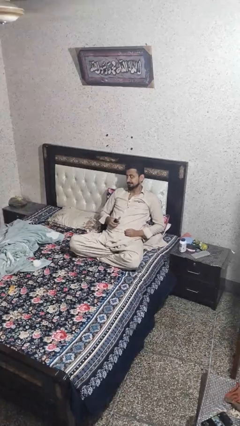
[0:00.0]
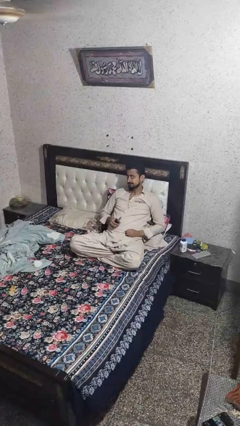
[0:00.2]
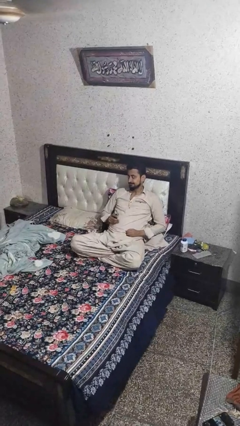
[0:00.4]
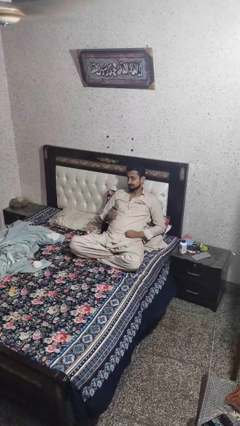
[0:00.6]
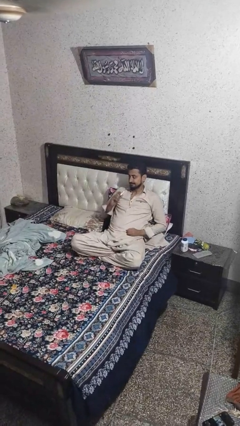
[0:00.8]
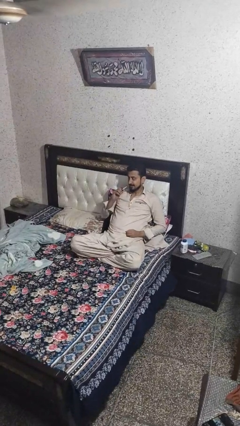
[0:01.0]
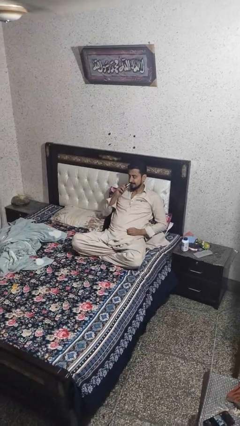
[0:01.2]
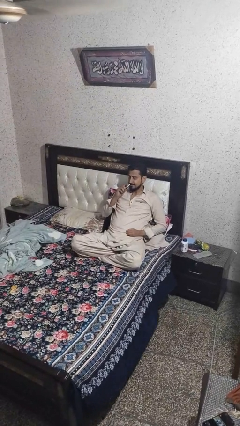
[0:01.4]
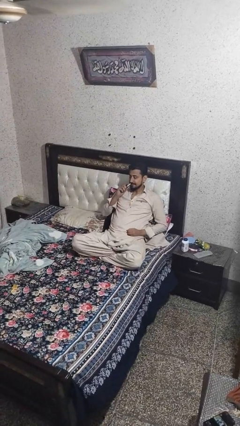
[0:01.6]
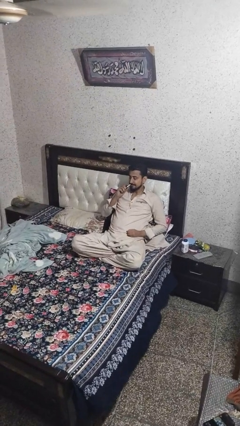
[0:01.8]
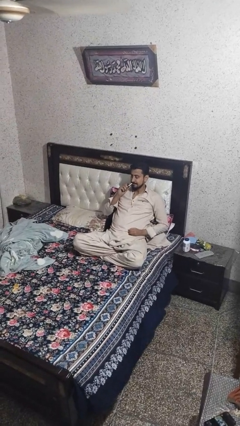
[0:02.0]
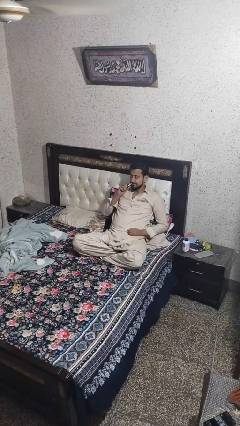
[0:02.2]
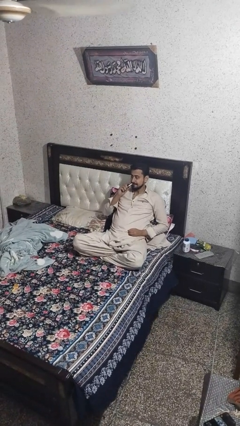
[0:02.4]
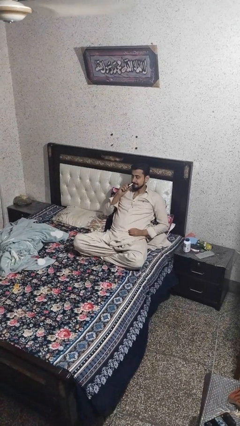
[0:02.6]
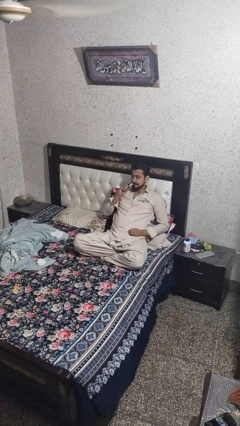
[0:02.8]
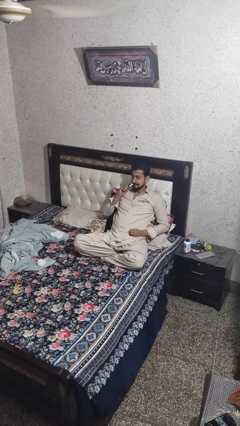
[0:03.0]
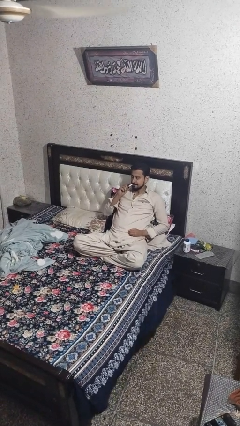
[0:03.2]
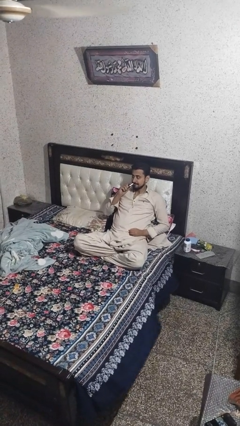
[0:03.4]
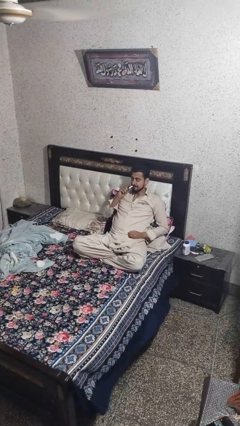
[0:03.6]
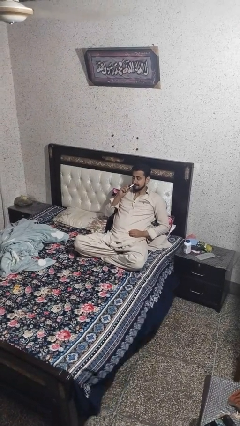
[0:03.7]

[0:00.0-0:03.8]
person vapes

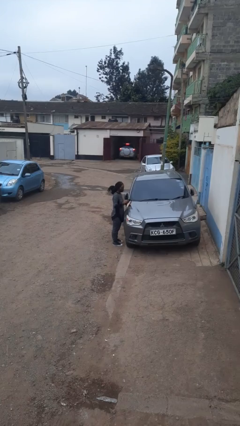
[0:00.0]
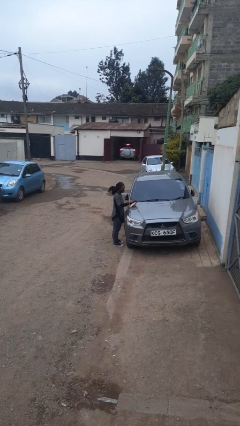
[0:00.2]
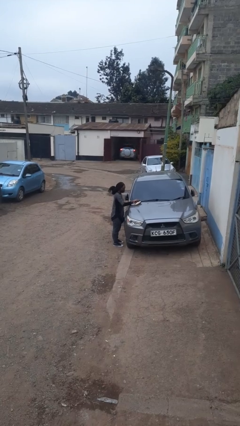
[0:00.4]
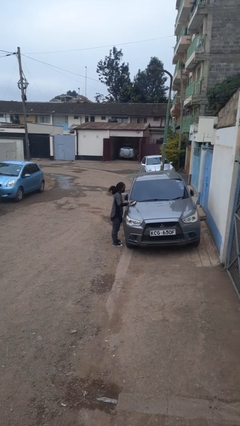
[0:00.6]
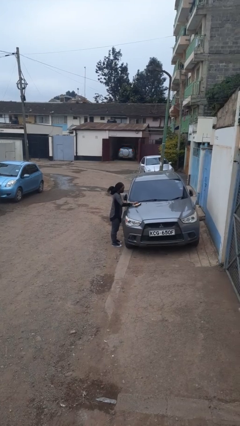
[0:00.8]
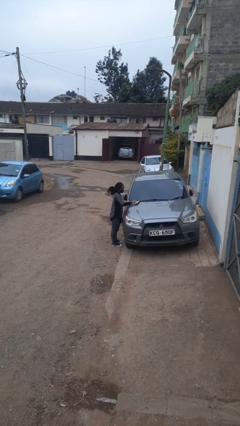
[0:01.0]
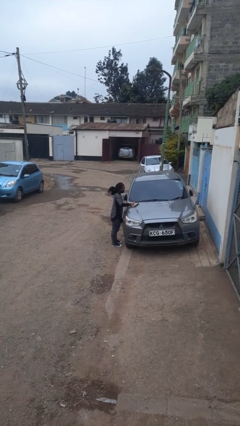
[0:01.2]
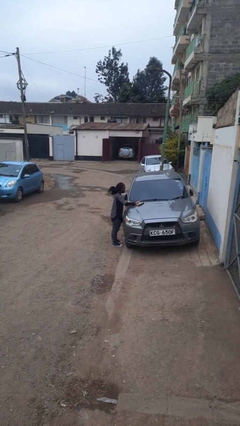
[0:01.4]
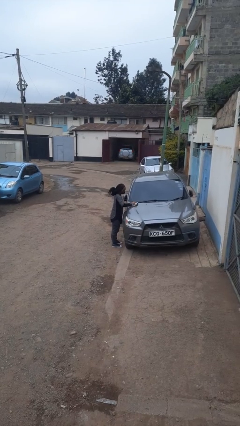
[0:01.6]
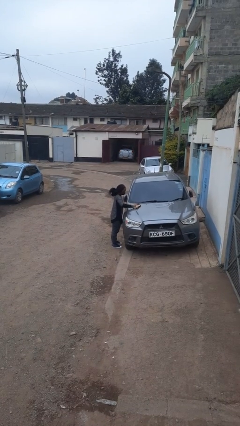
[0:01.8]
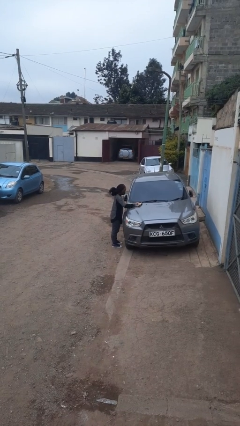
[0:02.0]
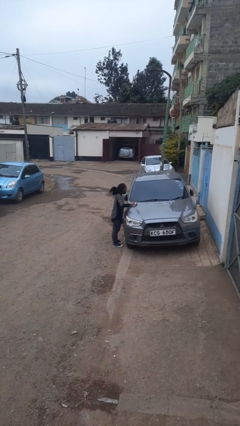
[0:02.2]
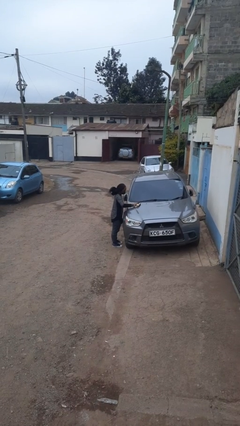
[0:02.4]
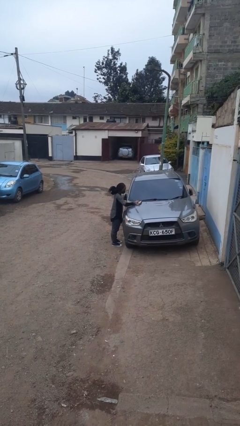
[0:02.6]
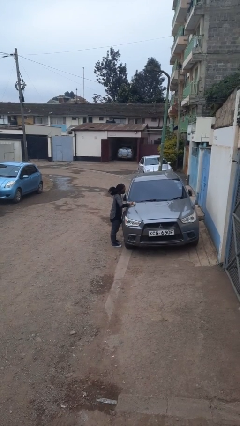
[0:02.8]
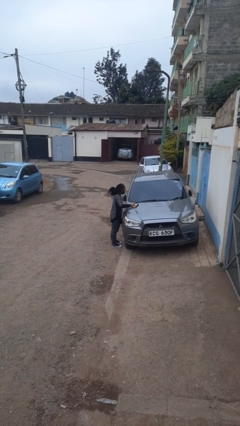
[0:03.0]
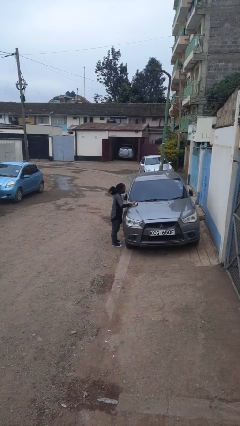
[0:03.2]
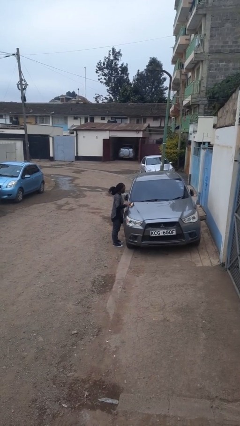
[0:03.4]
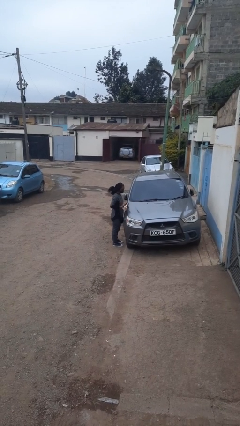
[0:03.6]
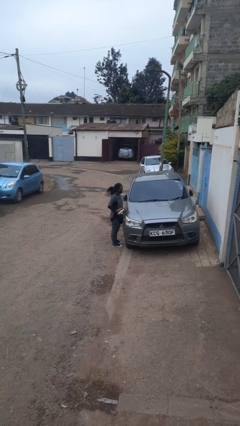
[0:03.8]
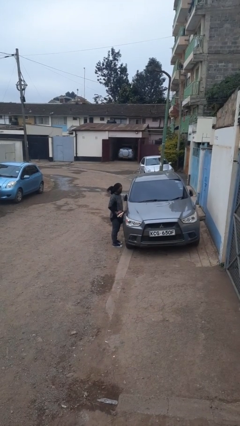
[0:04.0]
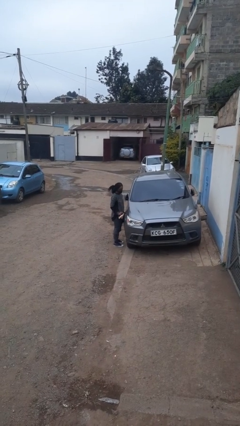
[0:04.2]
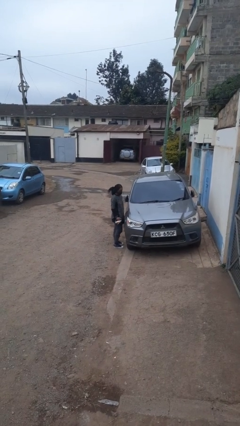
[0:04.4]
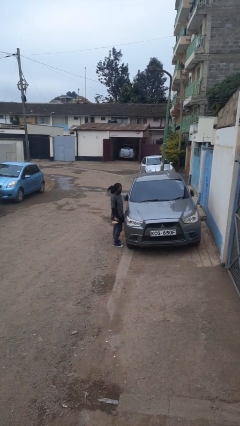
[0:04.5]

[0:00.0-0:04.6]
person polishes car with rag

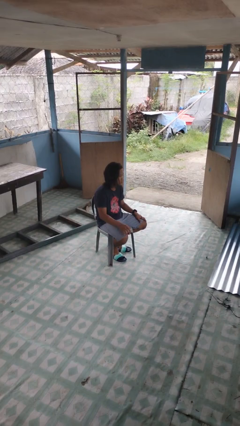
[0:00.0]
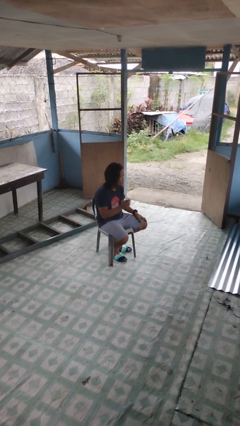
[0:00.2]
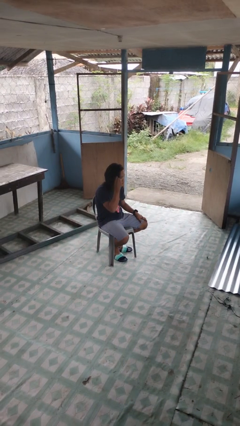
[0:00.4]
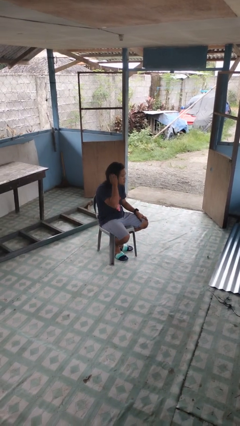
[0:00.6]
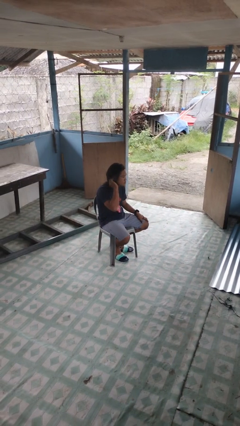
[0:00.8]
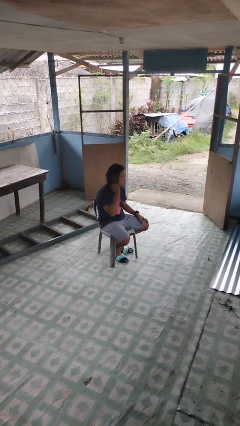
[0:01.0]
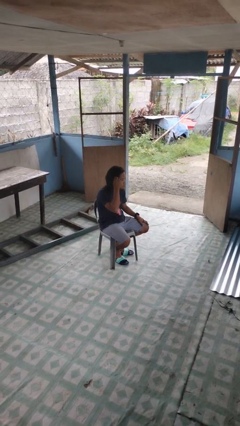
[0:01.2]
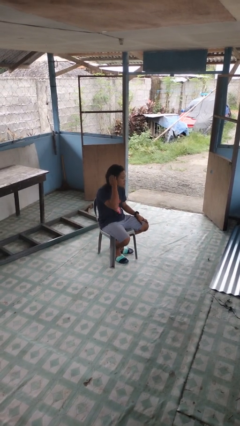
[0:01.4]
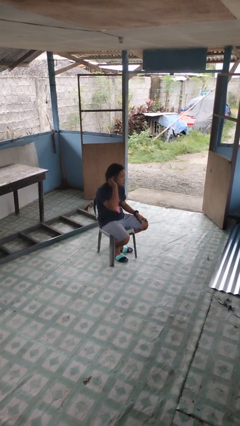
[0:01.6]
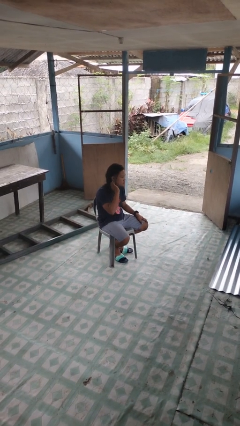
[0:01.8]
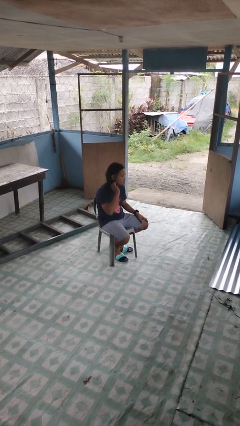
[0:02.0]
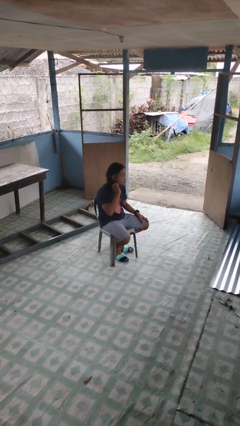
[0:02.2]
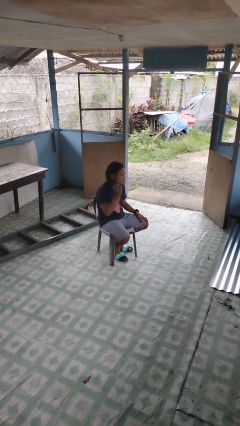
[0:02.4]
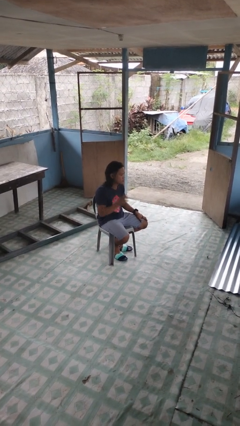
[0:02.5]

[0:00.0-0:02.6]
person strokes hair

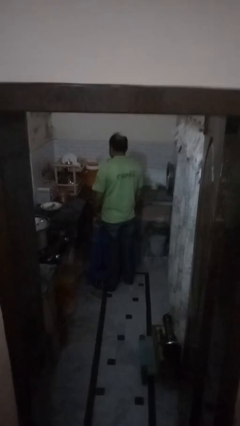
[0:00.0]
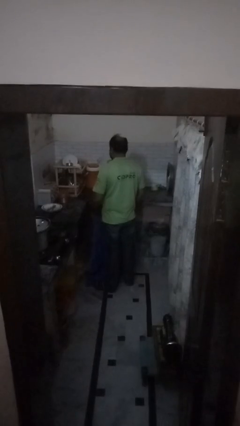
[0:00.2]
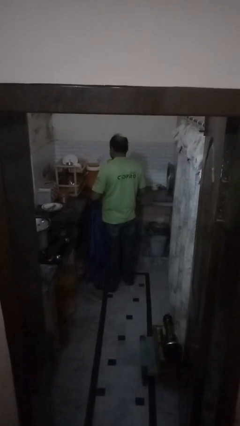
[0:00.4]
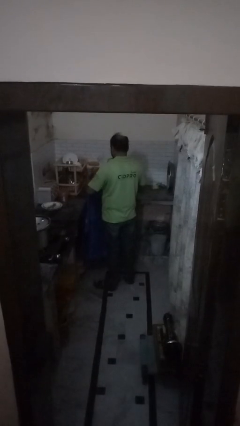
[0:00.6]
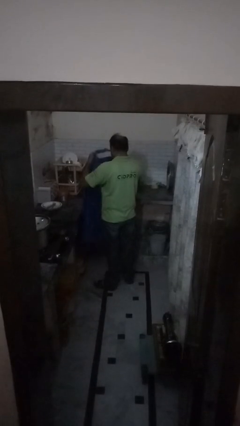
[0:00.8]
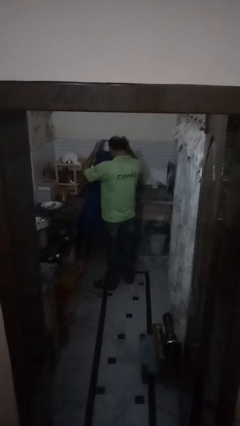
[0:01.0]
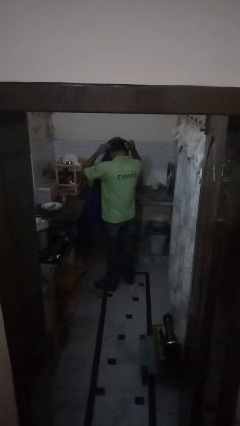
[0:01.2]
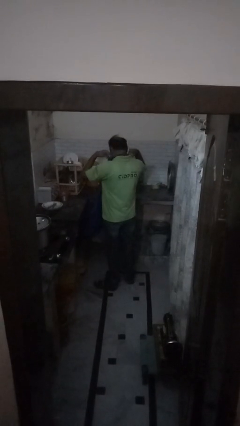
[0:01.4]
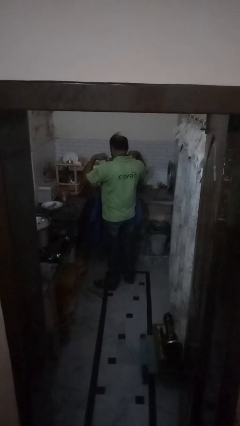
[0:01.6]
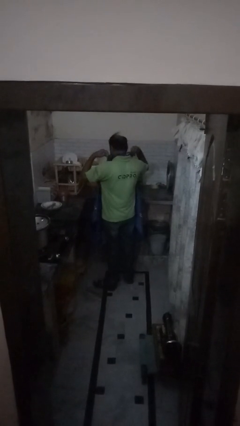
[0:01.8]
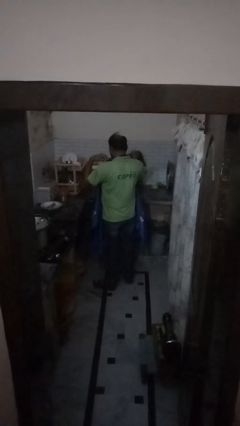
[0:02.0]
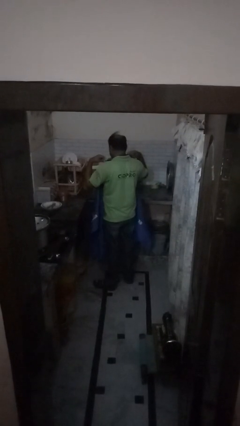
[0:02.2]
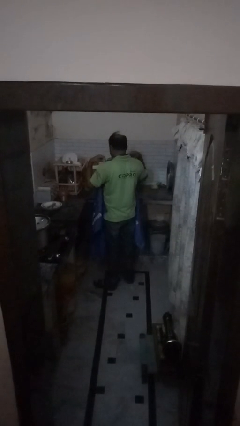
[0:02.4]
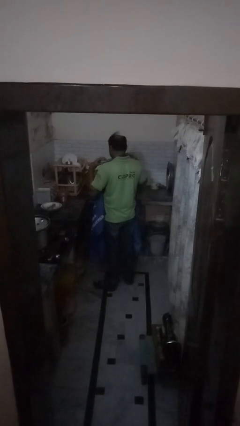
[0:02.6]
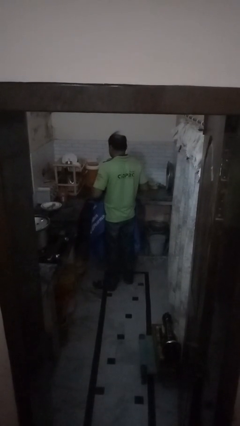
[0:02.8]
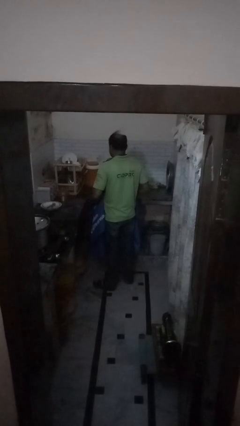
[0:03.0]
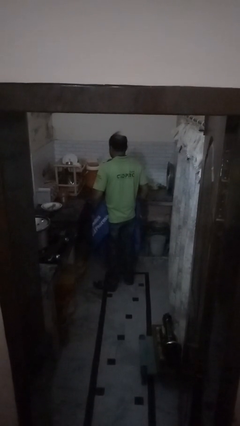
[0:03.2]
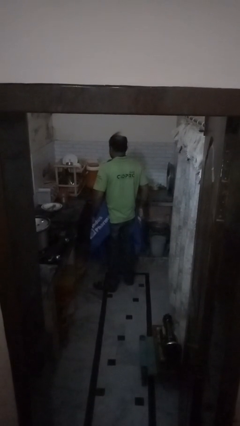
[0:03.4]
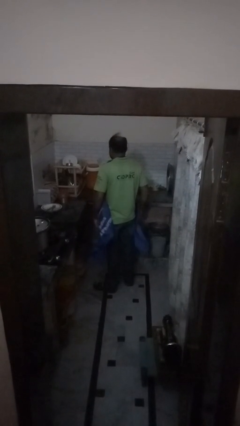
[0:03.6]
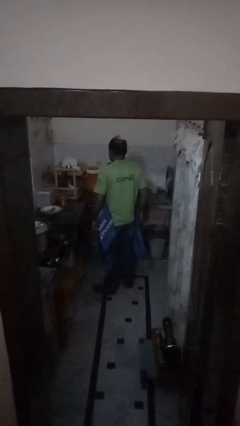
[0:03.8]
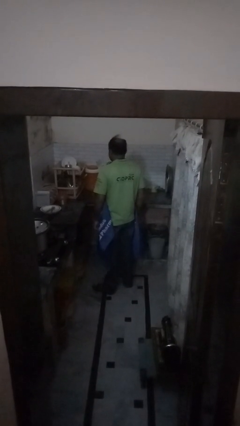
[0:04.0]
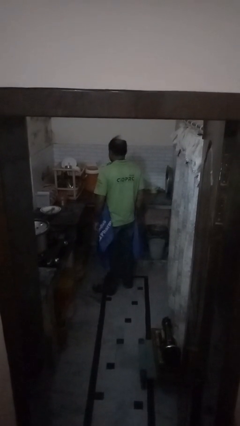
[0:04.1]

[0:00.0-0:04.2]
person puts on apron

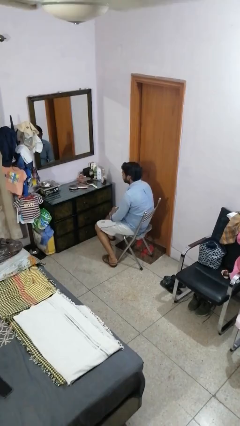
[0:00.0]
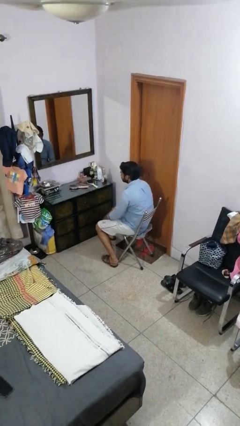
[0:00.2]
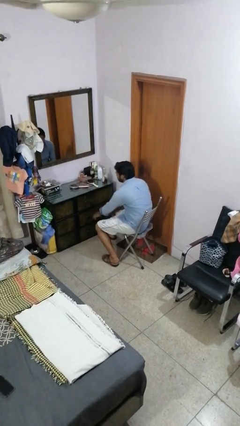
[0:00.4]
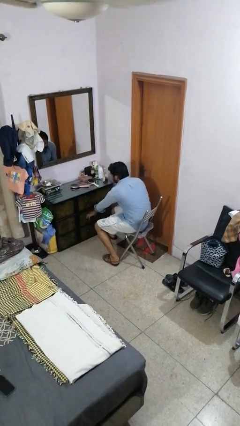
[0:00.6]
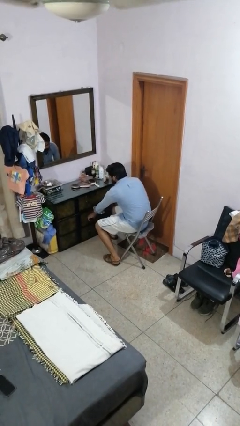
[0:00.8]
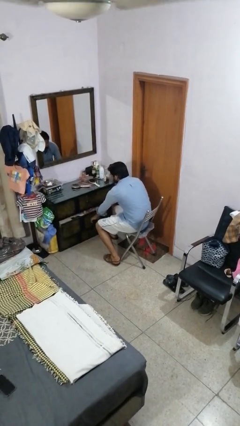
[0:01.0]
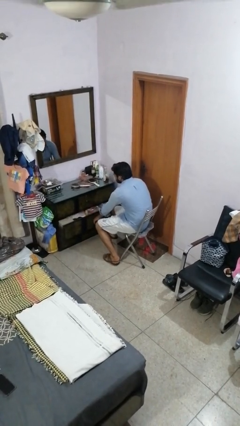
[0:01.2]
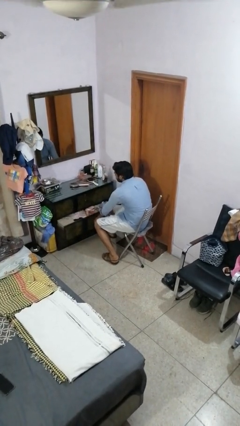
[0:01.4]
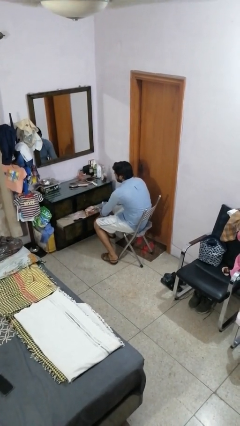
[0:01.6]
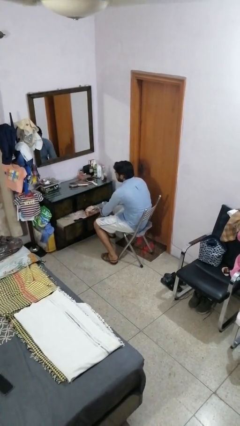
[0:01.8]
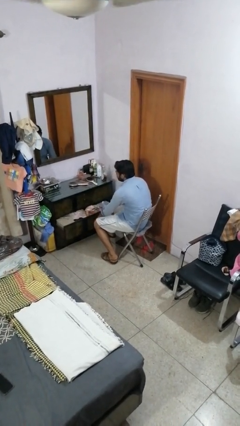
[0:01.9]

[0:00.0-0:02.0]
person opens dresser drawer

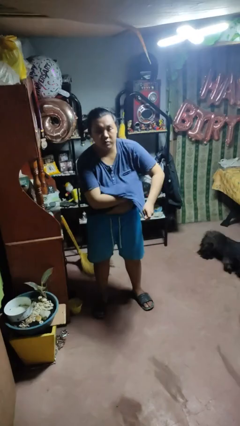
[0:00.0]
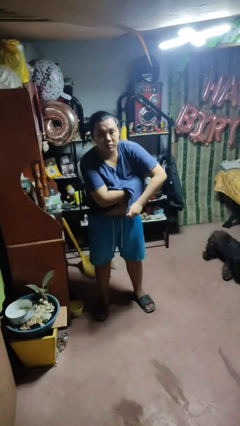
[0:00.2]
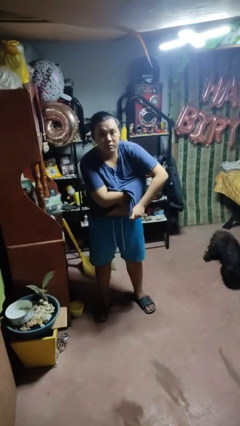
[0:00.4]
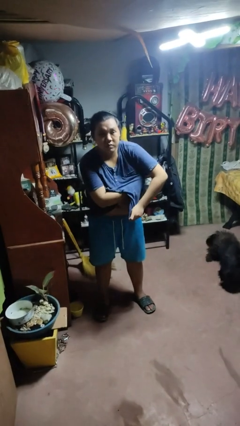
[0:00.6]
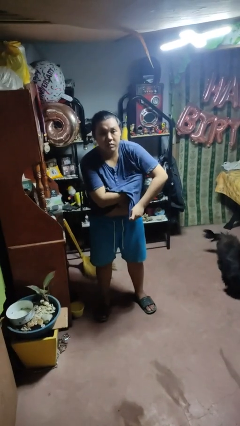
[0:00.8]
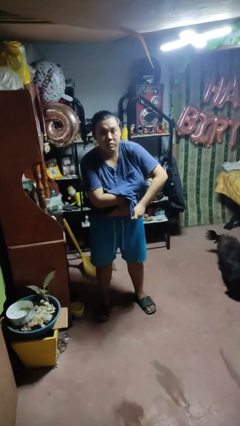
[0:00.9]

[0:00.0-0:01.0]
person applies deodorant
